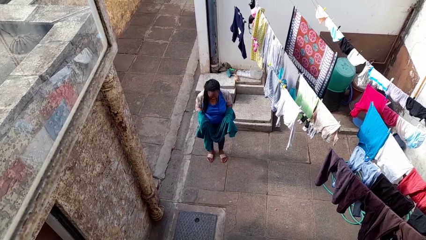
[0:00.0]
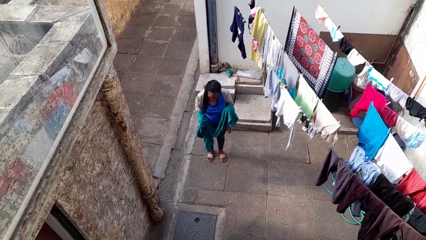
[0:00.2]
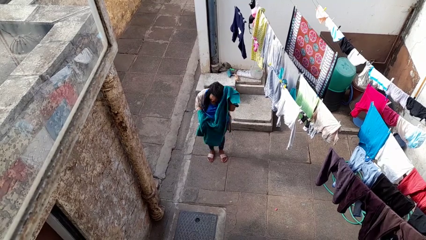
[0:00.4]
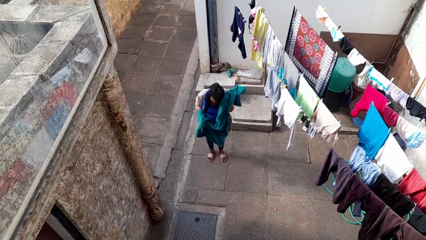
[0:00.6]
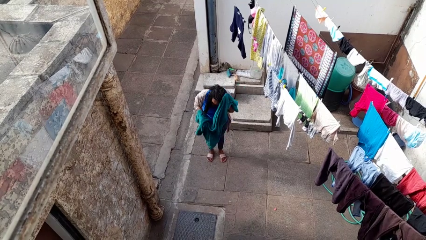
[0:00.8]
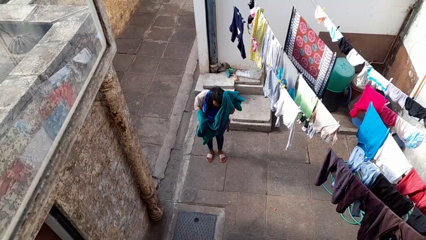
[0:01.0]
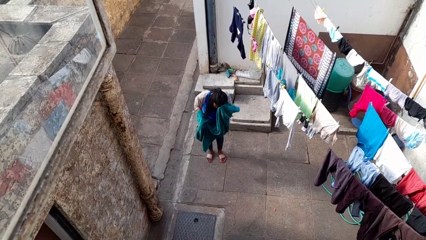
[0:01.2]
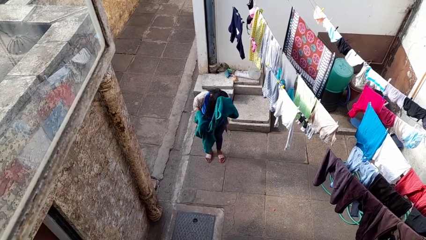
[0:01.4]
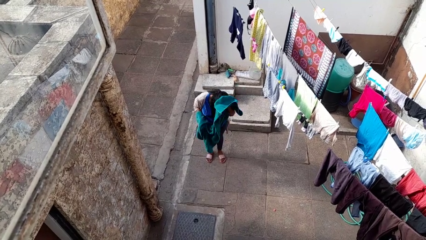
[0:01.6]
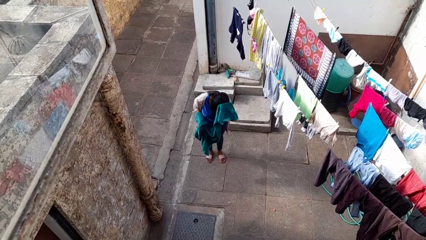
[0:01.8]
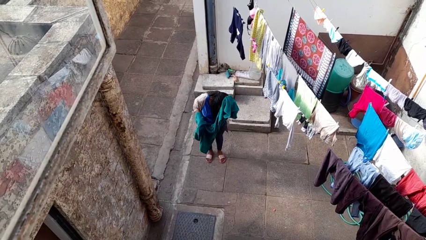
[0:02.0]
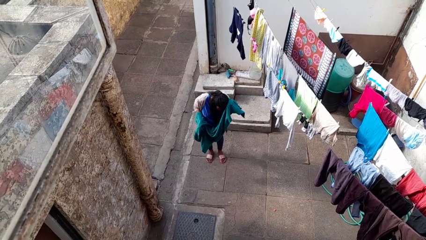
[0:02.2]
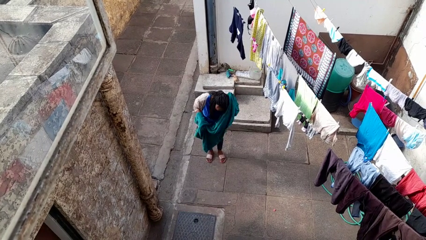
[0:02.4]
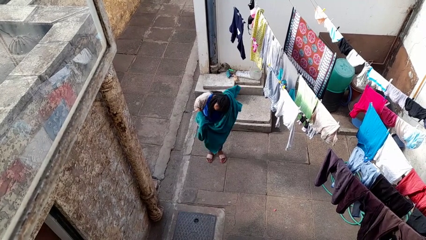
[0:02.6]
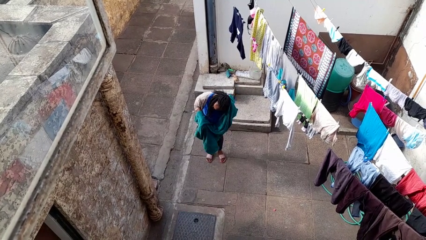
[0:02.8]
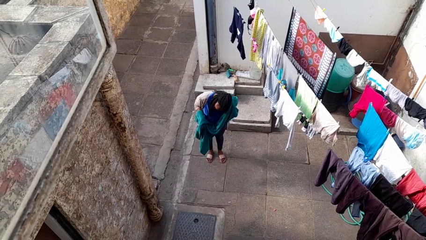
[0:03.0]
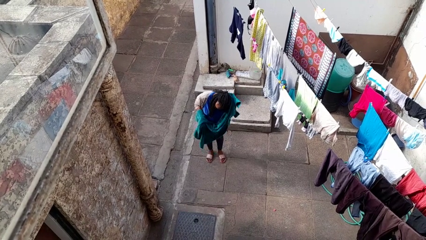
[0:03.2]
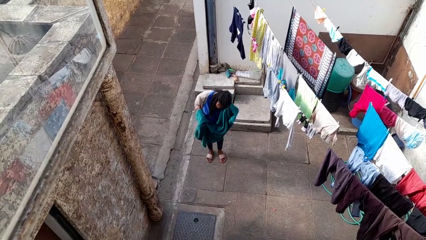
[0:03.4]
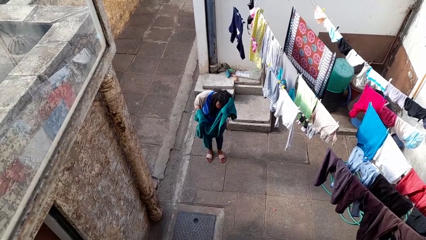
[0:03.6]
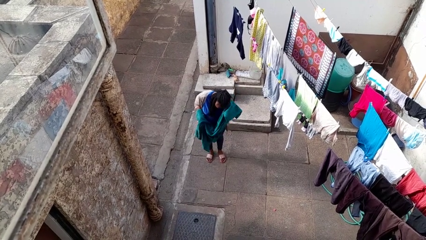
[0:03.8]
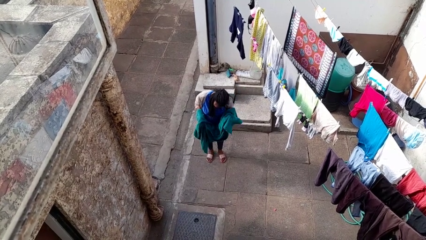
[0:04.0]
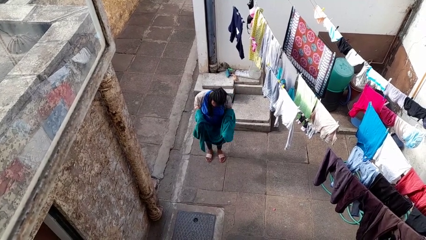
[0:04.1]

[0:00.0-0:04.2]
person dries hair with towel

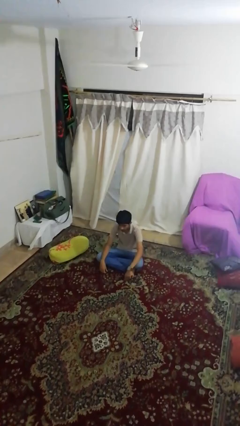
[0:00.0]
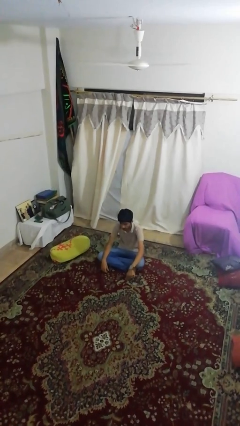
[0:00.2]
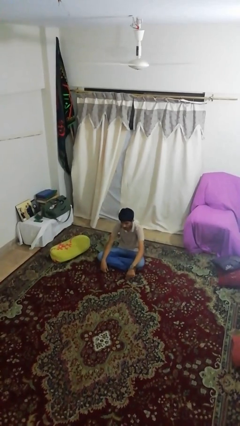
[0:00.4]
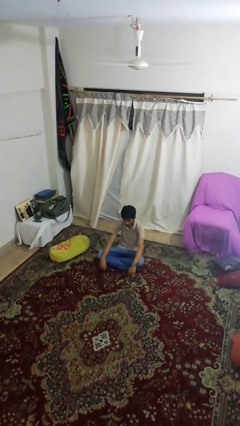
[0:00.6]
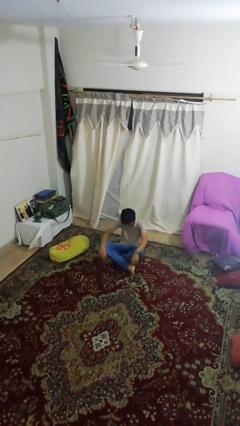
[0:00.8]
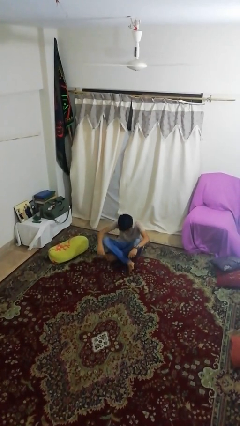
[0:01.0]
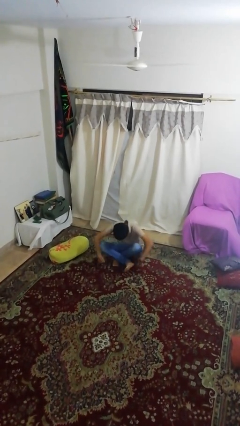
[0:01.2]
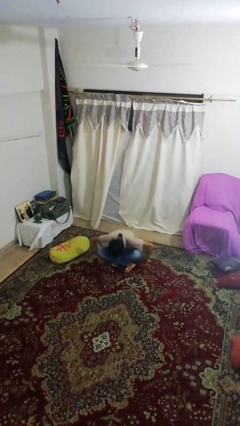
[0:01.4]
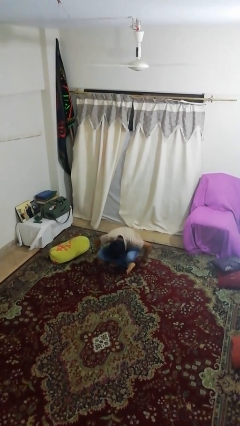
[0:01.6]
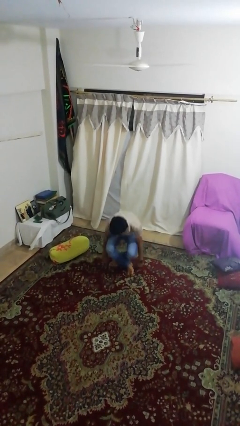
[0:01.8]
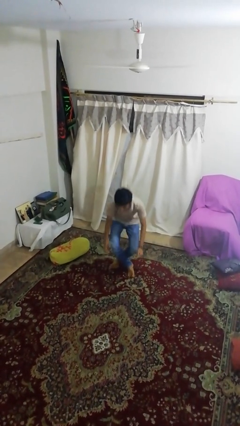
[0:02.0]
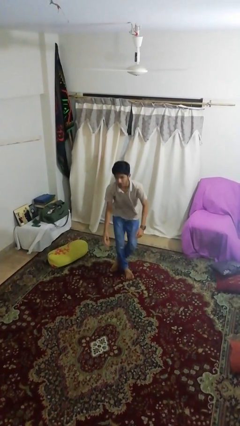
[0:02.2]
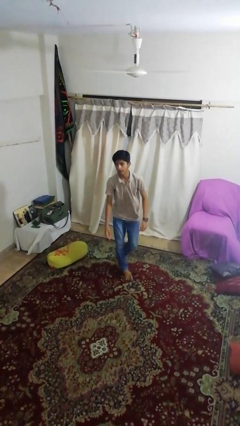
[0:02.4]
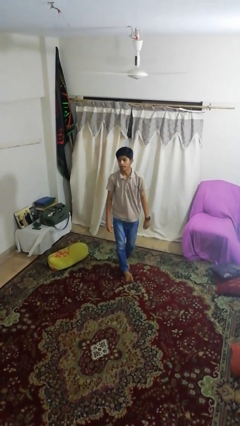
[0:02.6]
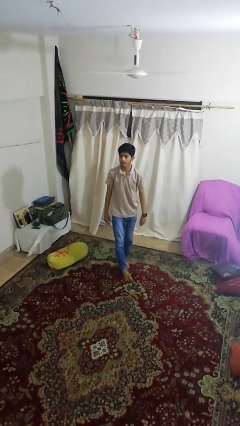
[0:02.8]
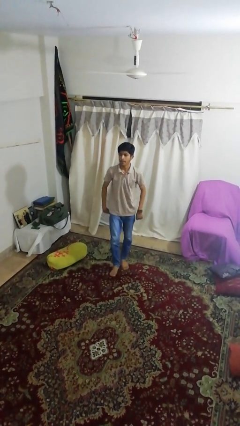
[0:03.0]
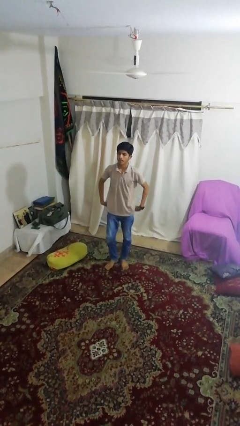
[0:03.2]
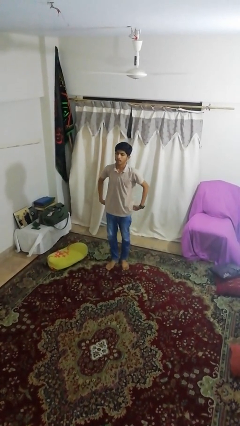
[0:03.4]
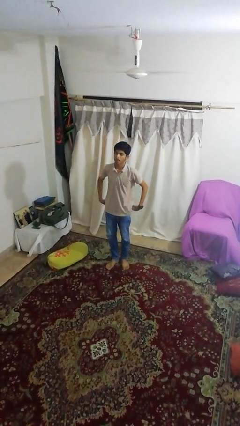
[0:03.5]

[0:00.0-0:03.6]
person stands up from floor

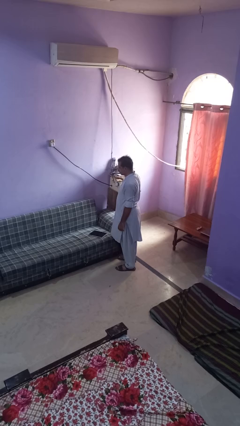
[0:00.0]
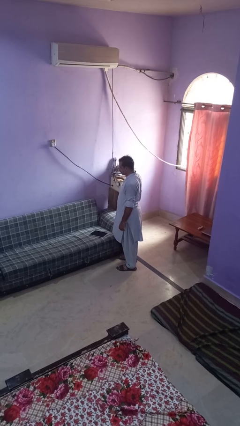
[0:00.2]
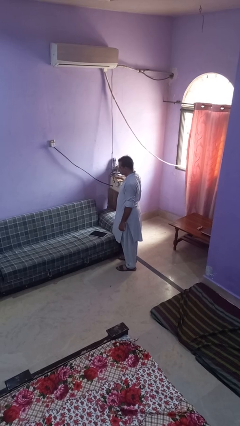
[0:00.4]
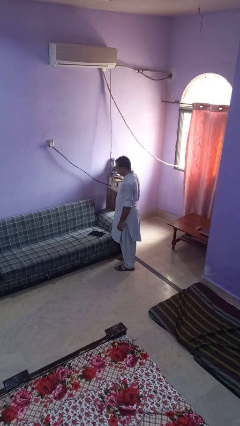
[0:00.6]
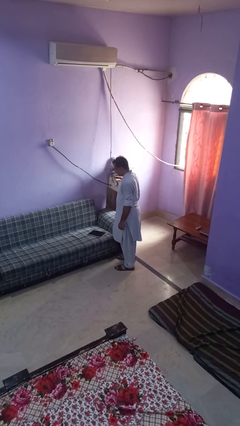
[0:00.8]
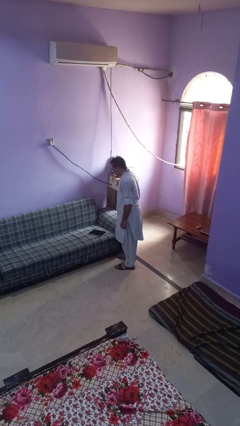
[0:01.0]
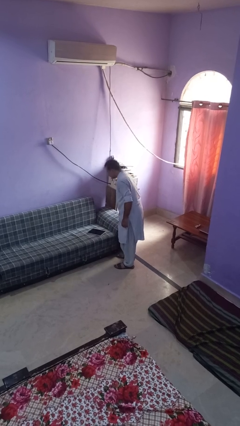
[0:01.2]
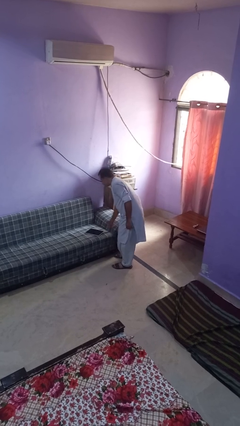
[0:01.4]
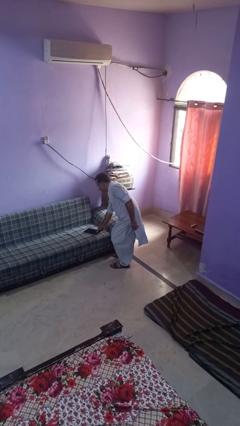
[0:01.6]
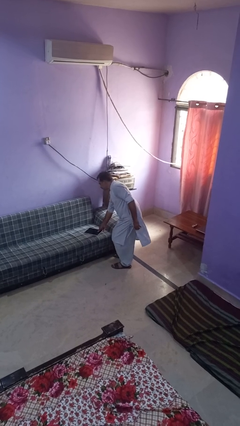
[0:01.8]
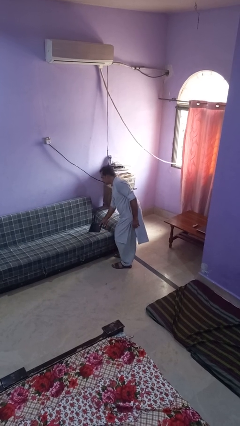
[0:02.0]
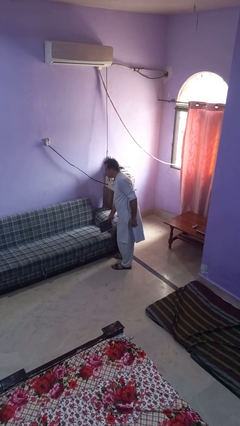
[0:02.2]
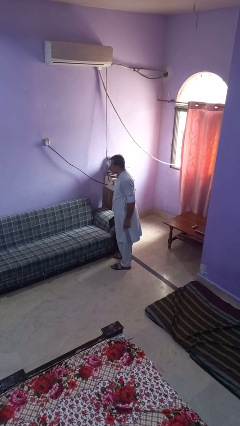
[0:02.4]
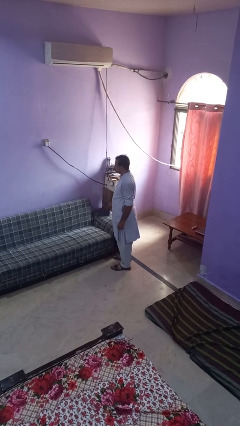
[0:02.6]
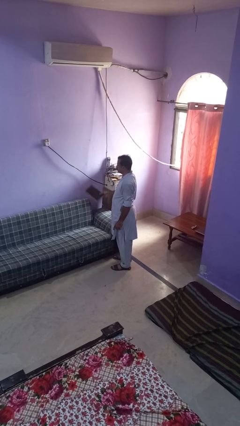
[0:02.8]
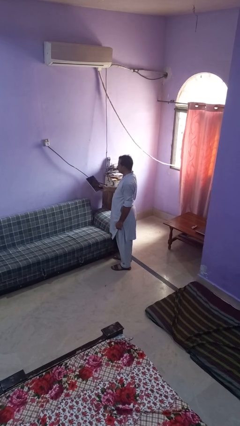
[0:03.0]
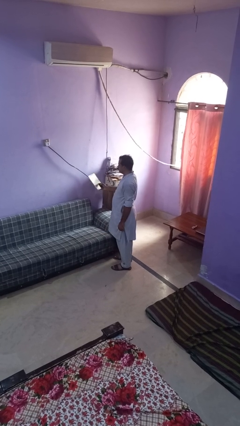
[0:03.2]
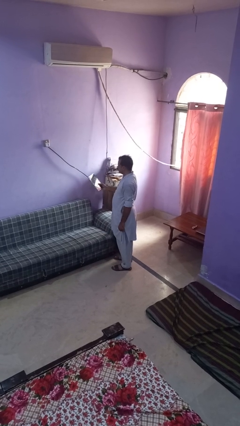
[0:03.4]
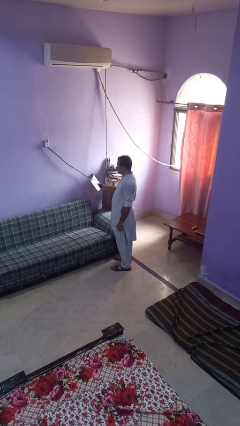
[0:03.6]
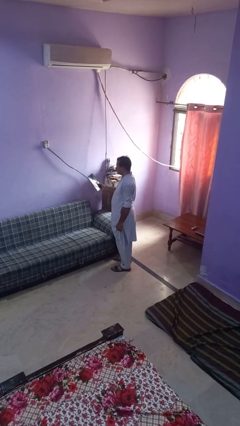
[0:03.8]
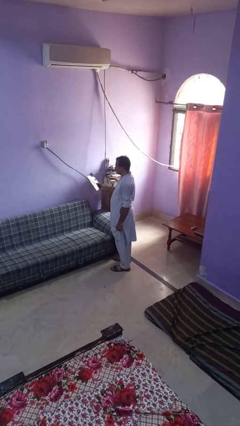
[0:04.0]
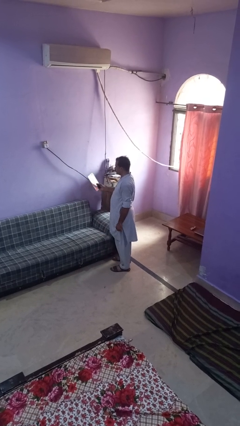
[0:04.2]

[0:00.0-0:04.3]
person picks up object from couch

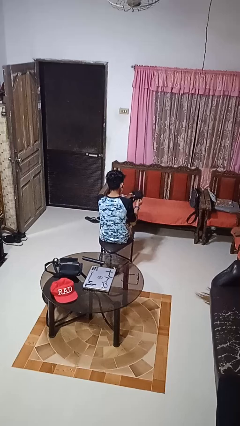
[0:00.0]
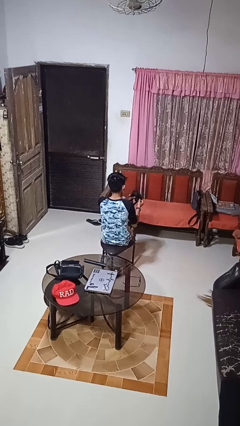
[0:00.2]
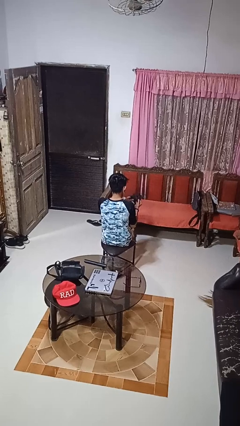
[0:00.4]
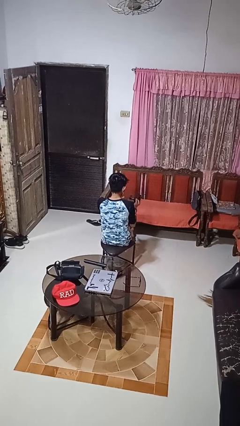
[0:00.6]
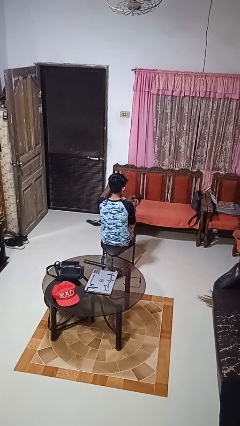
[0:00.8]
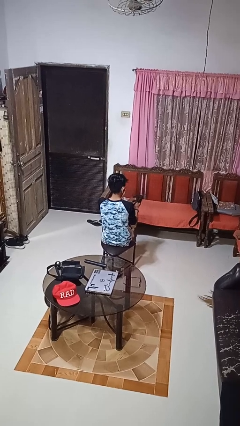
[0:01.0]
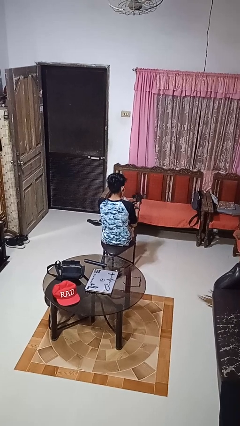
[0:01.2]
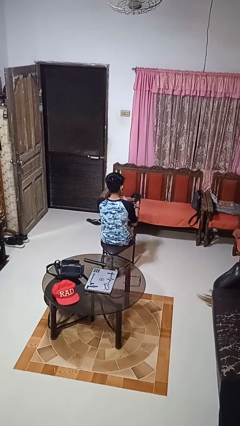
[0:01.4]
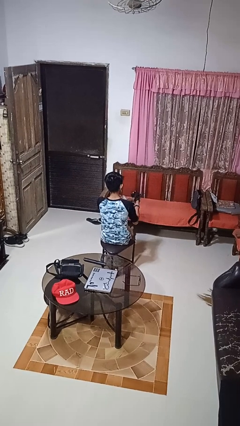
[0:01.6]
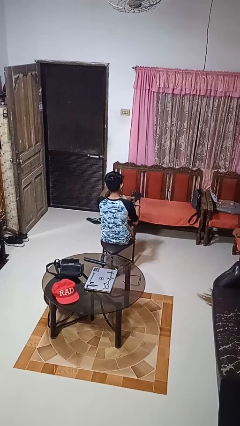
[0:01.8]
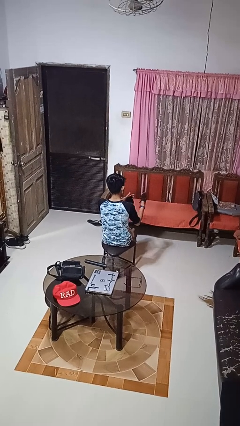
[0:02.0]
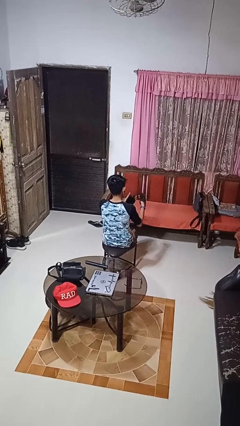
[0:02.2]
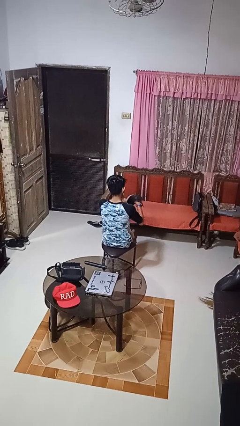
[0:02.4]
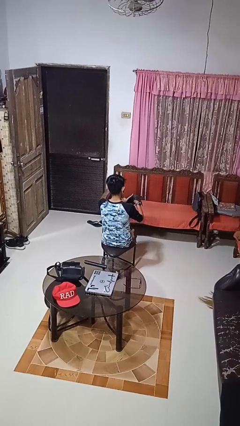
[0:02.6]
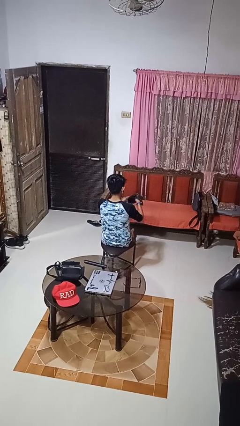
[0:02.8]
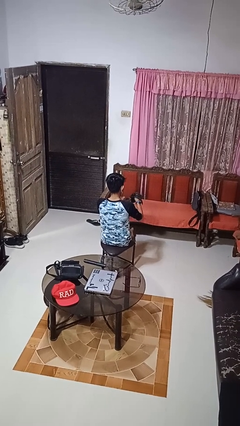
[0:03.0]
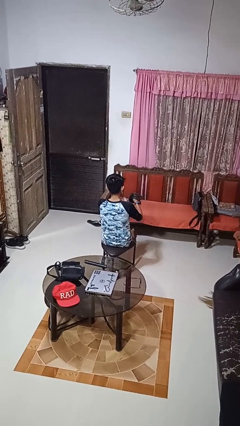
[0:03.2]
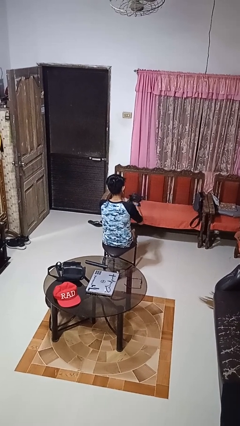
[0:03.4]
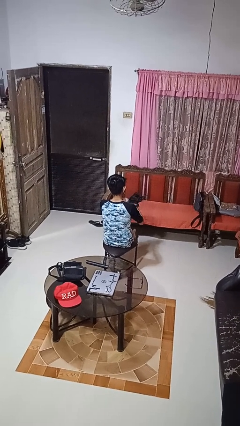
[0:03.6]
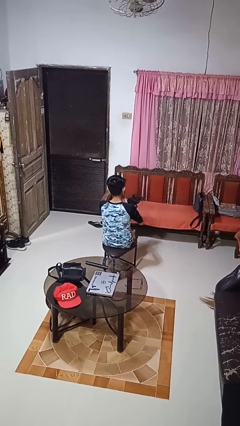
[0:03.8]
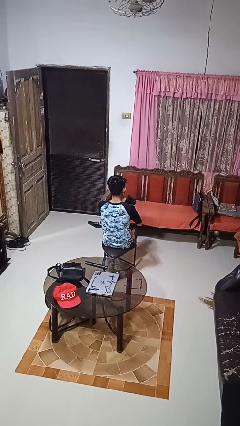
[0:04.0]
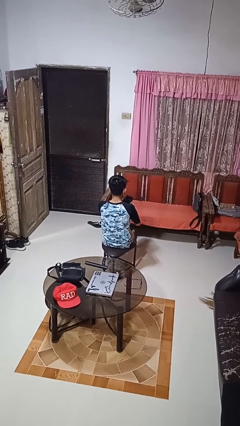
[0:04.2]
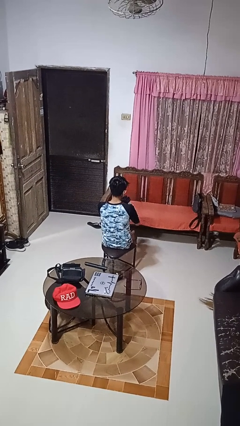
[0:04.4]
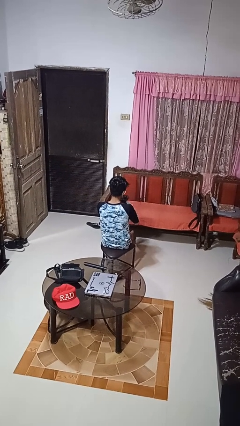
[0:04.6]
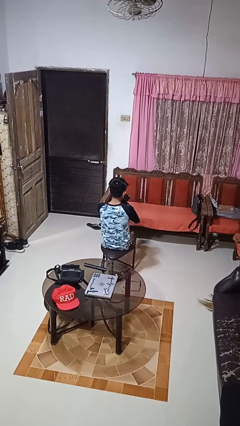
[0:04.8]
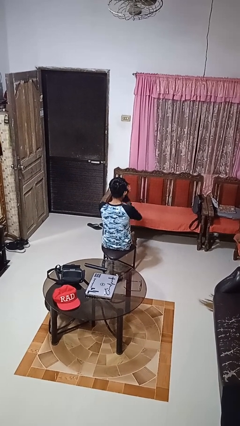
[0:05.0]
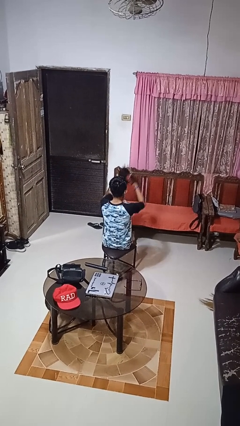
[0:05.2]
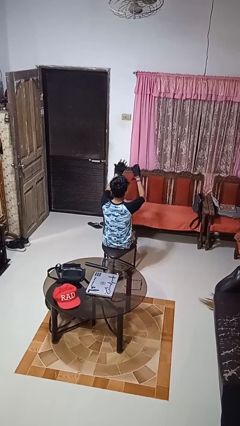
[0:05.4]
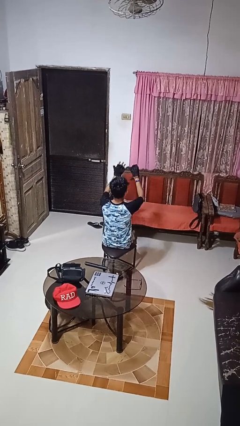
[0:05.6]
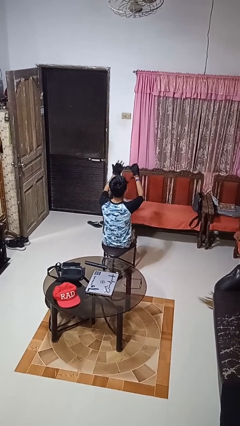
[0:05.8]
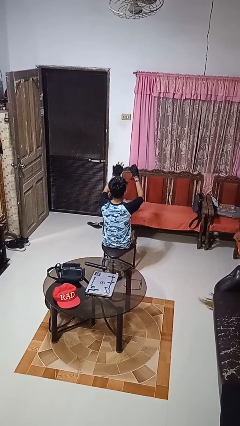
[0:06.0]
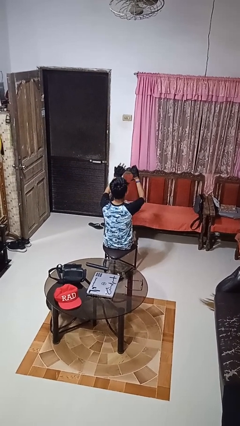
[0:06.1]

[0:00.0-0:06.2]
person puts on gloves
